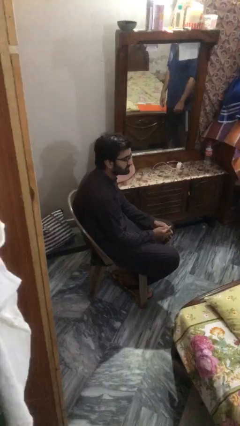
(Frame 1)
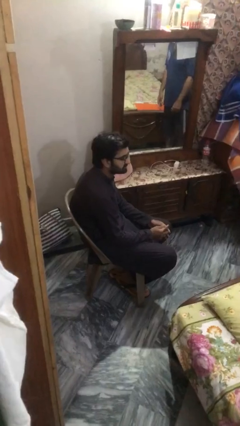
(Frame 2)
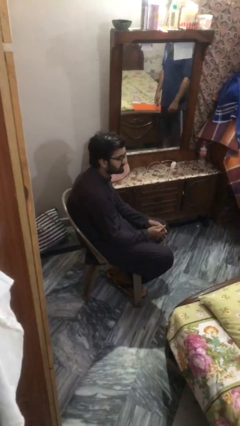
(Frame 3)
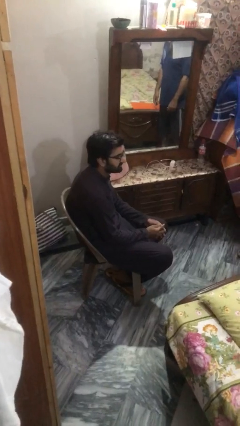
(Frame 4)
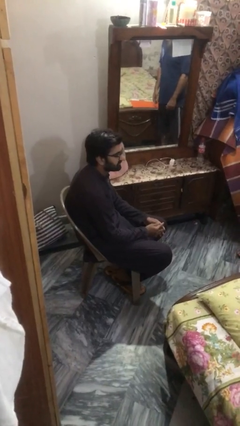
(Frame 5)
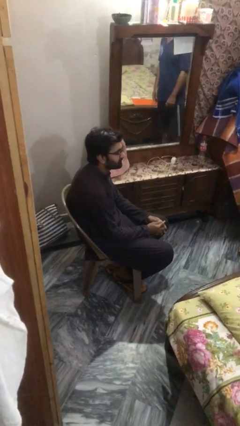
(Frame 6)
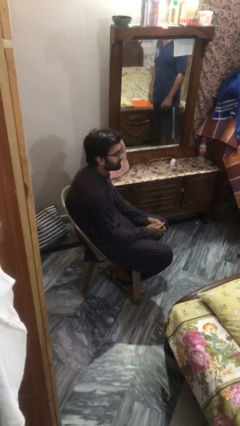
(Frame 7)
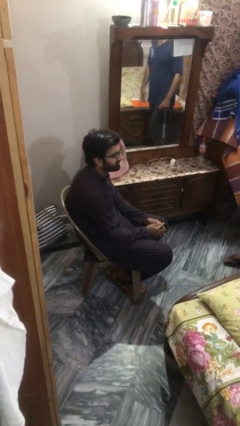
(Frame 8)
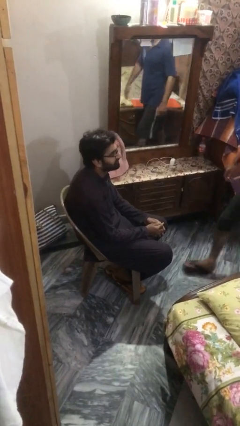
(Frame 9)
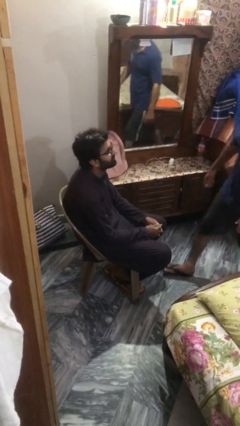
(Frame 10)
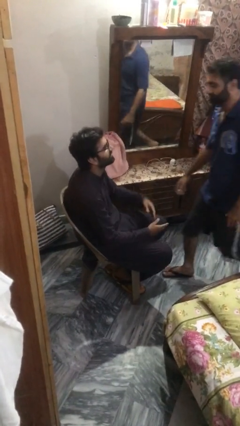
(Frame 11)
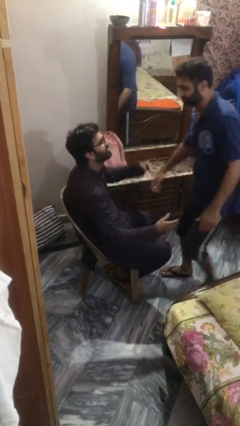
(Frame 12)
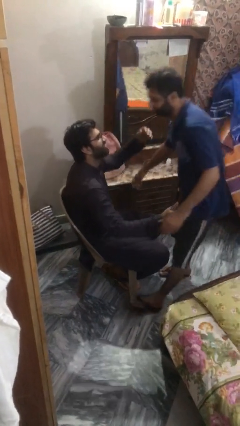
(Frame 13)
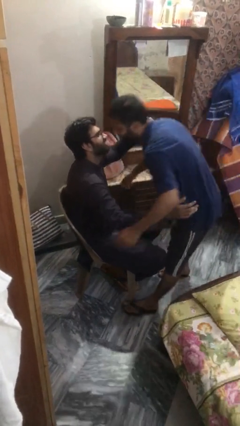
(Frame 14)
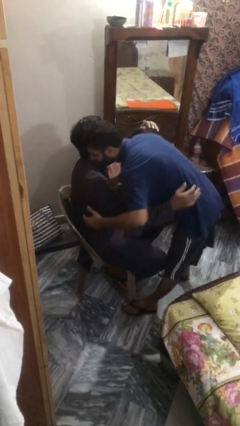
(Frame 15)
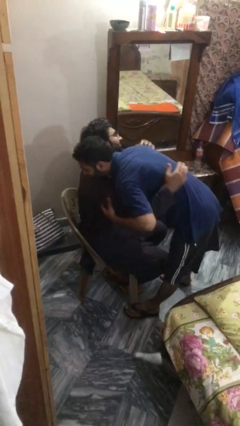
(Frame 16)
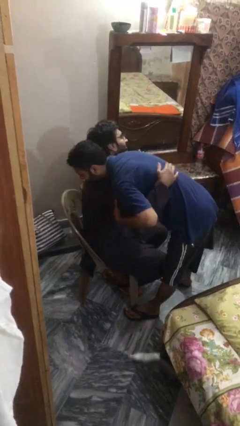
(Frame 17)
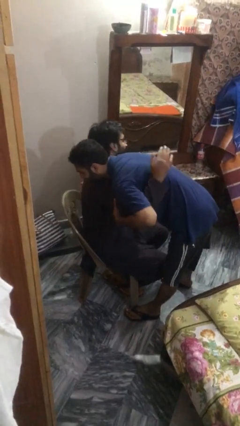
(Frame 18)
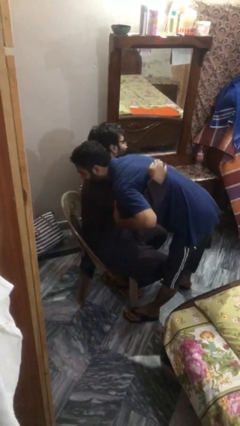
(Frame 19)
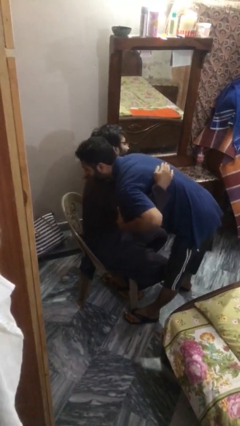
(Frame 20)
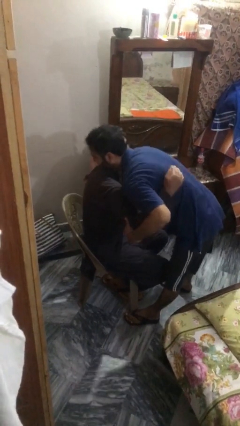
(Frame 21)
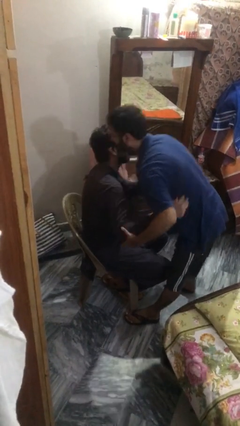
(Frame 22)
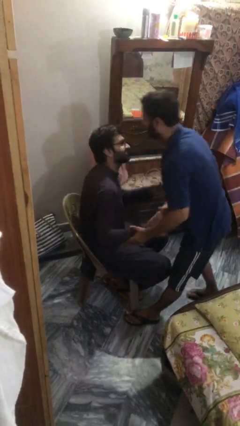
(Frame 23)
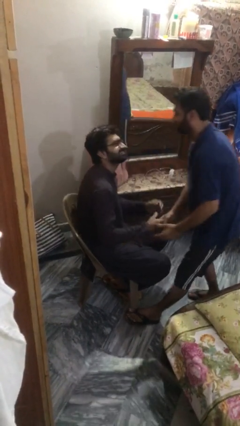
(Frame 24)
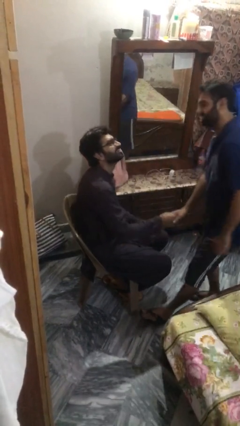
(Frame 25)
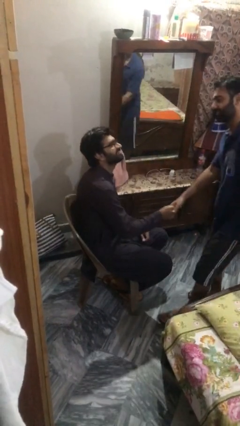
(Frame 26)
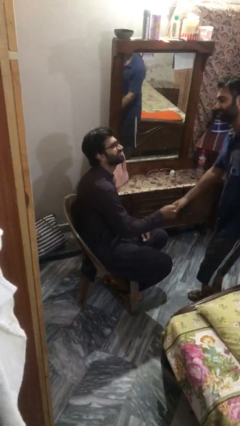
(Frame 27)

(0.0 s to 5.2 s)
person embraces person

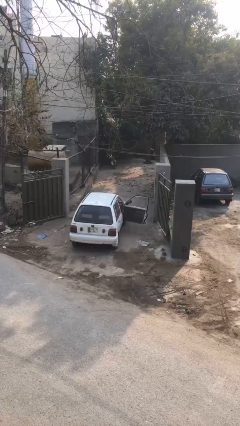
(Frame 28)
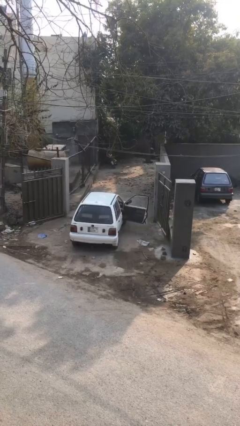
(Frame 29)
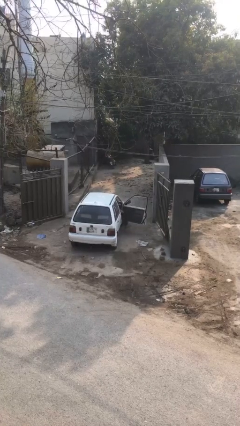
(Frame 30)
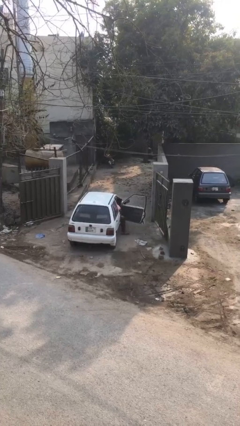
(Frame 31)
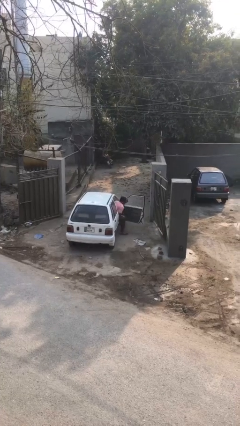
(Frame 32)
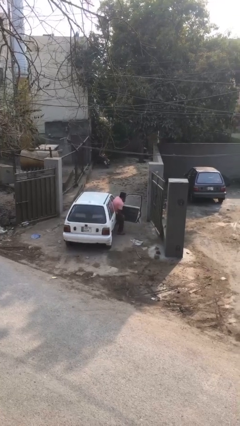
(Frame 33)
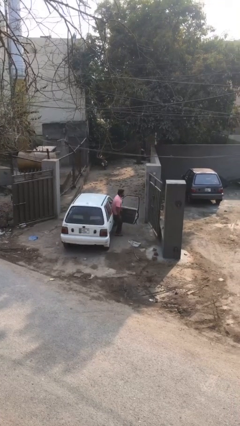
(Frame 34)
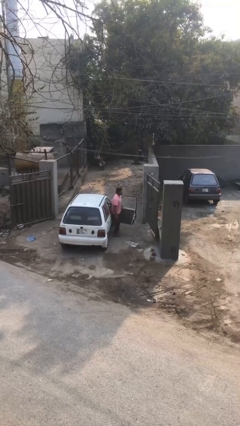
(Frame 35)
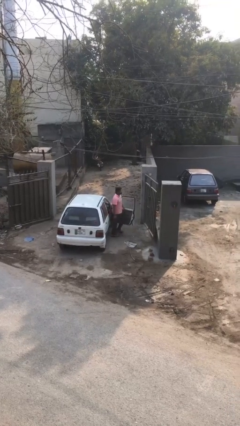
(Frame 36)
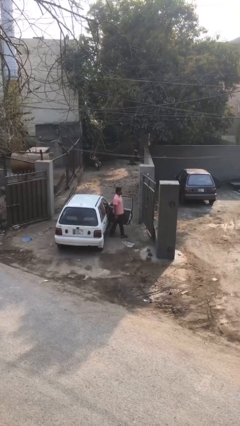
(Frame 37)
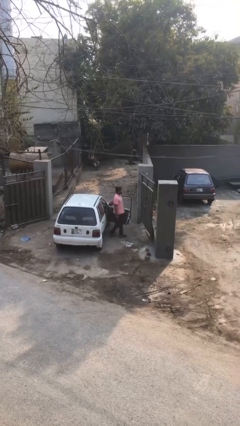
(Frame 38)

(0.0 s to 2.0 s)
person exits car

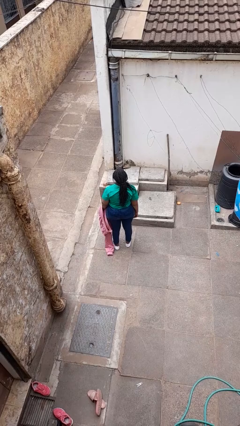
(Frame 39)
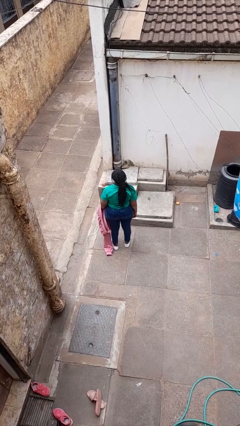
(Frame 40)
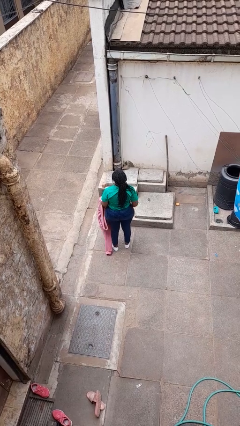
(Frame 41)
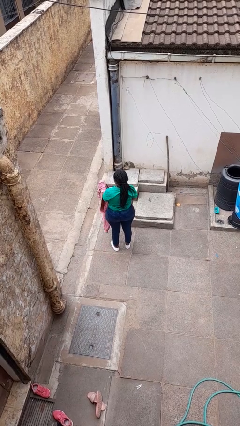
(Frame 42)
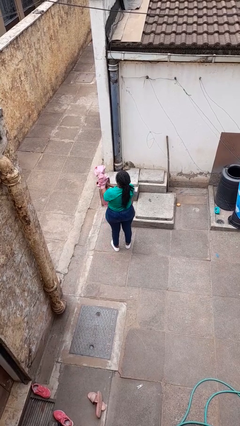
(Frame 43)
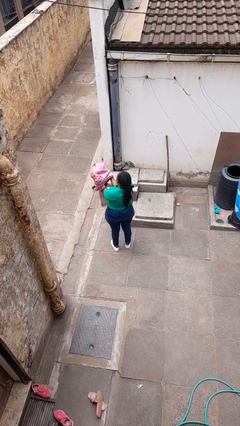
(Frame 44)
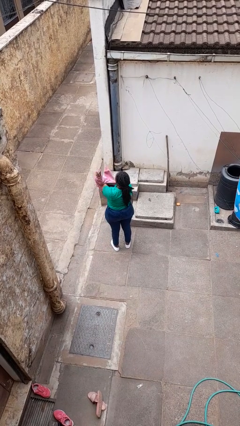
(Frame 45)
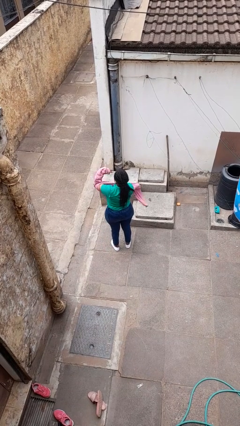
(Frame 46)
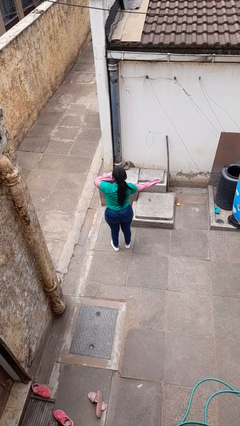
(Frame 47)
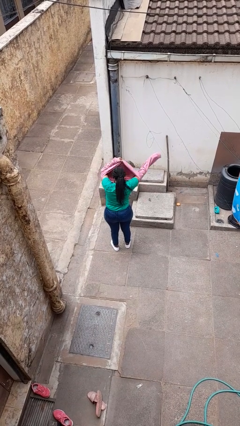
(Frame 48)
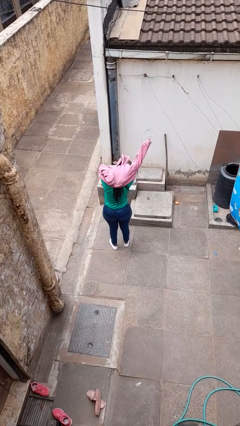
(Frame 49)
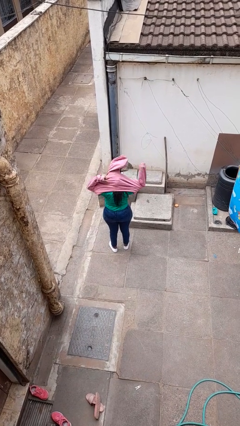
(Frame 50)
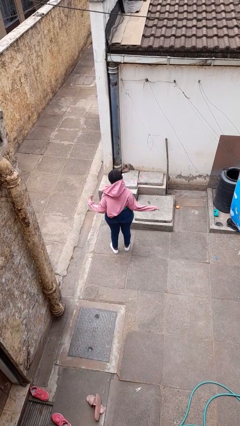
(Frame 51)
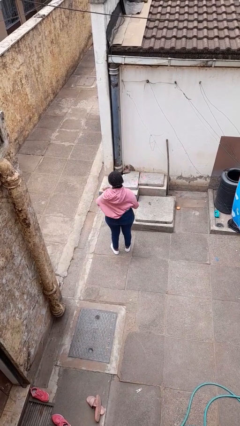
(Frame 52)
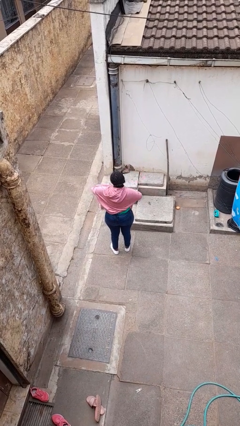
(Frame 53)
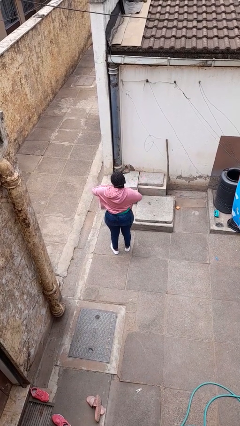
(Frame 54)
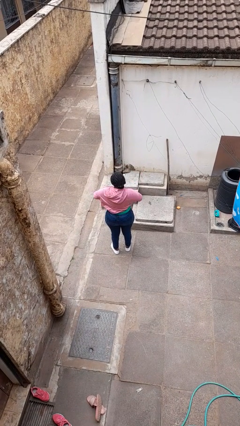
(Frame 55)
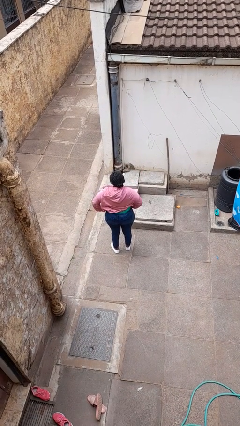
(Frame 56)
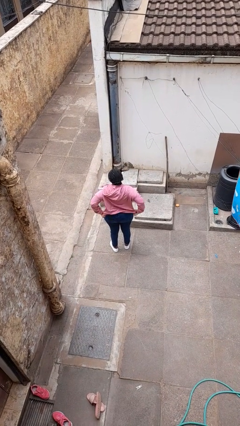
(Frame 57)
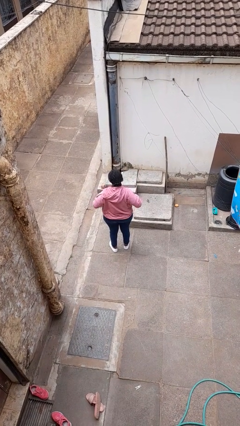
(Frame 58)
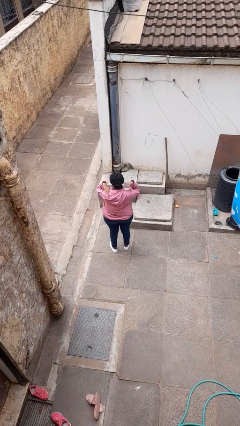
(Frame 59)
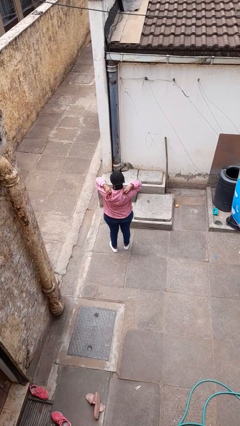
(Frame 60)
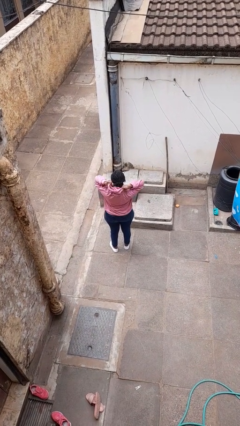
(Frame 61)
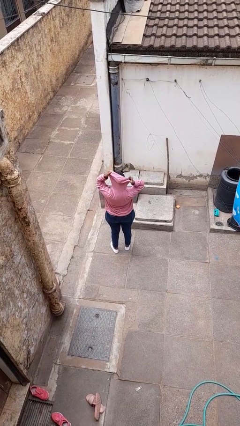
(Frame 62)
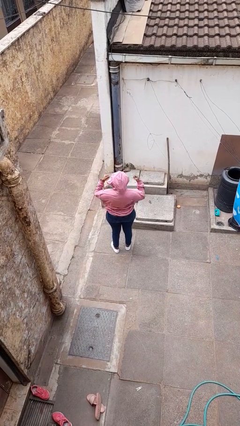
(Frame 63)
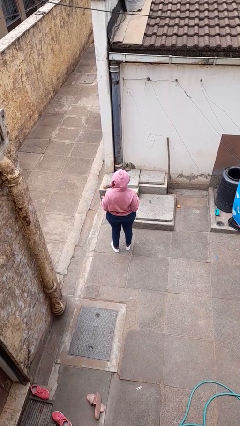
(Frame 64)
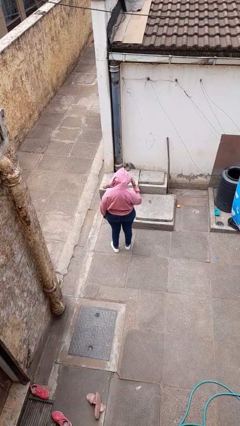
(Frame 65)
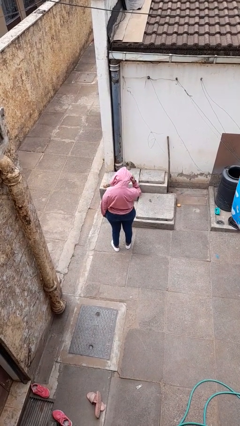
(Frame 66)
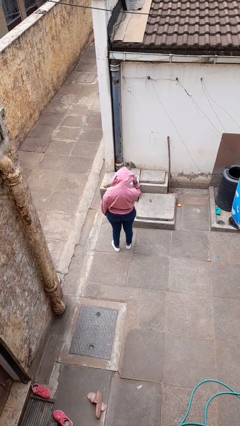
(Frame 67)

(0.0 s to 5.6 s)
person puts on hoodie

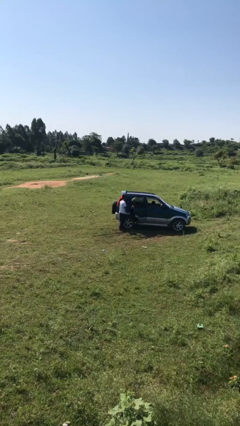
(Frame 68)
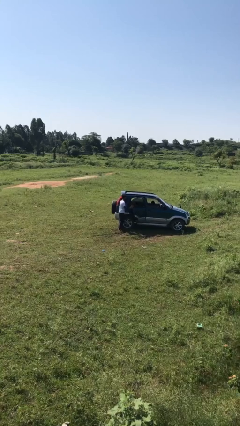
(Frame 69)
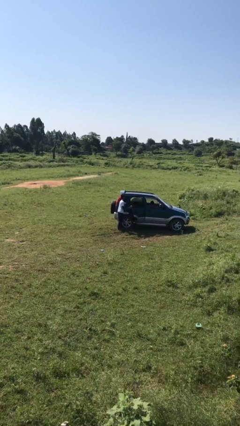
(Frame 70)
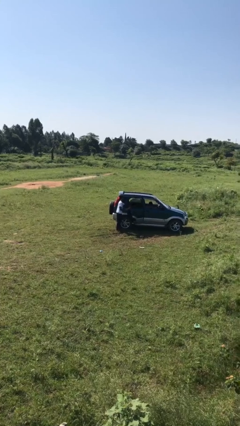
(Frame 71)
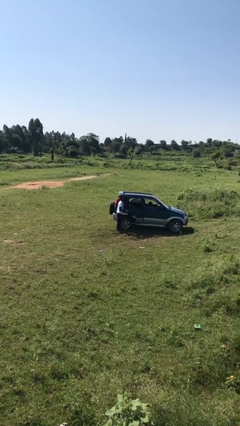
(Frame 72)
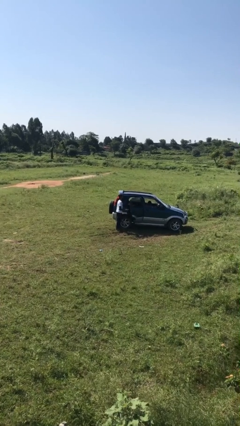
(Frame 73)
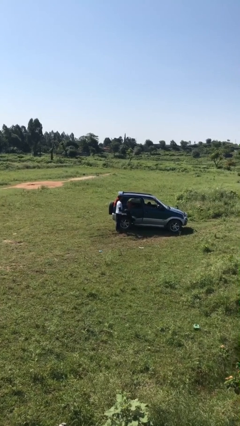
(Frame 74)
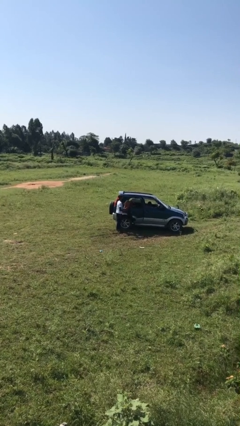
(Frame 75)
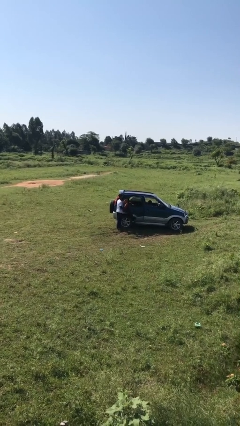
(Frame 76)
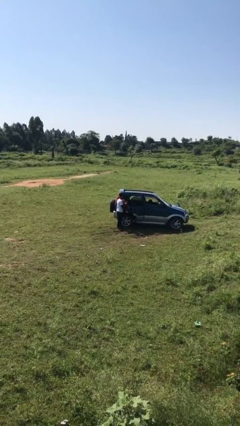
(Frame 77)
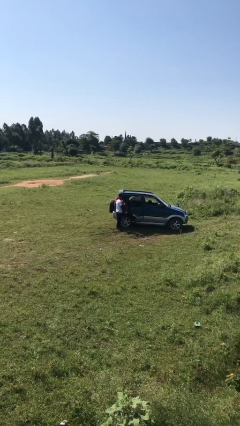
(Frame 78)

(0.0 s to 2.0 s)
person unloads car

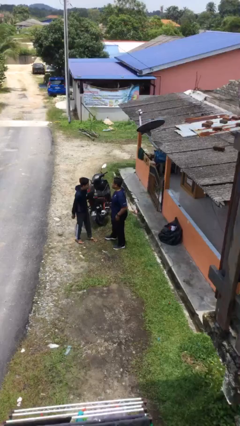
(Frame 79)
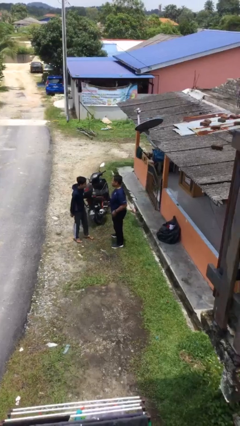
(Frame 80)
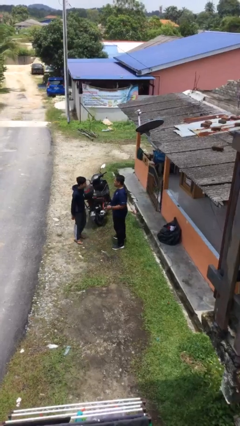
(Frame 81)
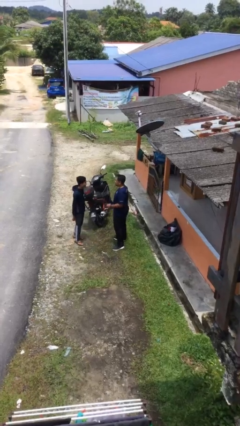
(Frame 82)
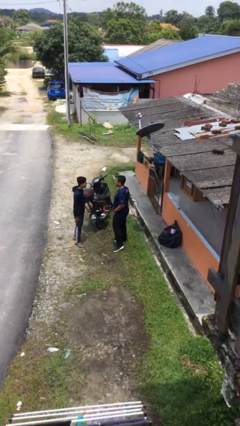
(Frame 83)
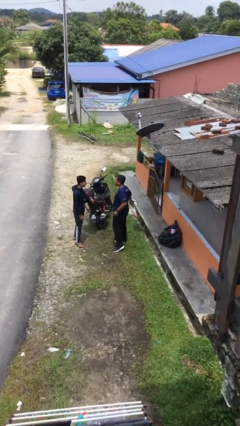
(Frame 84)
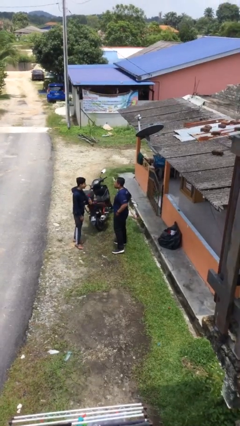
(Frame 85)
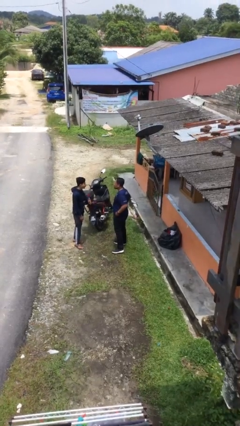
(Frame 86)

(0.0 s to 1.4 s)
person talks to person

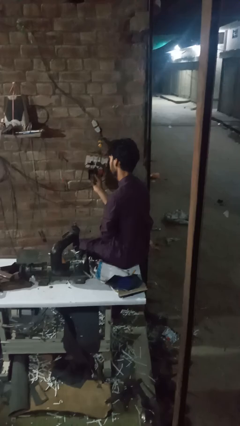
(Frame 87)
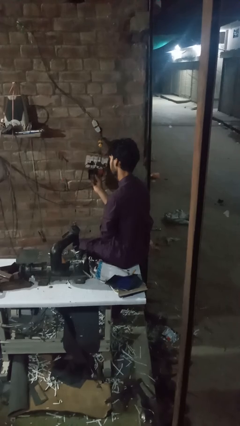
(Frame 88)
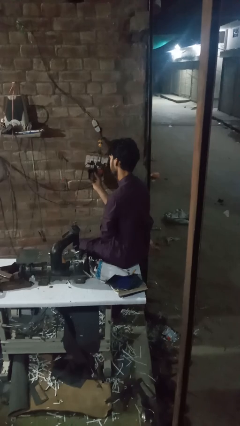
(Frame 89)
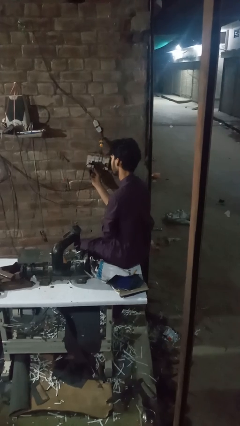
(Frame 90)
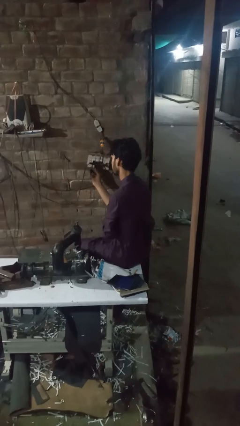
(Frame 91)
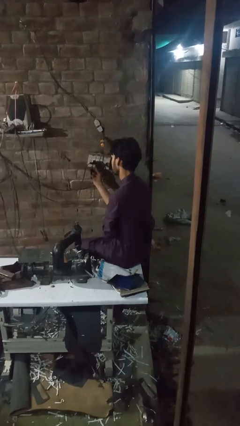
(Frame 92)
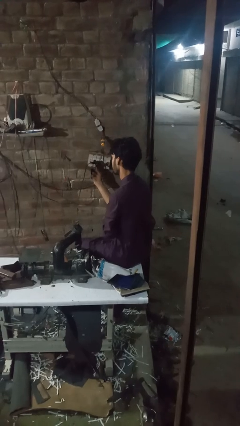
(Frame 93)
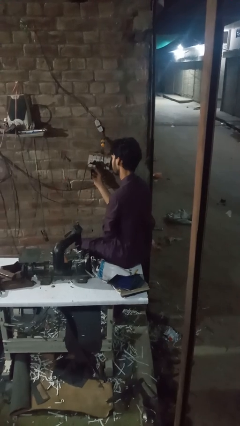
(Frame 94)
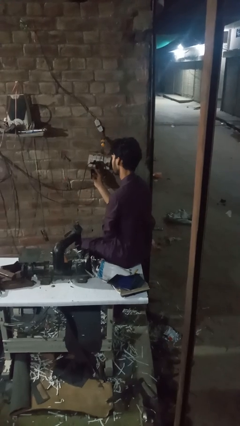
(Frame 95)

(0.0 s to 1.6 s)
person plugs into electrical socket
